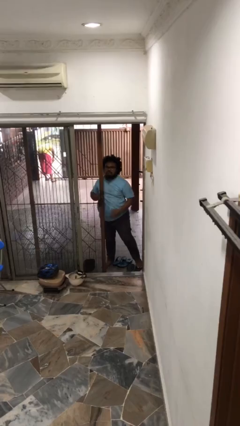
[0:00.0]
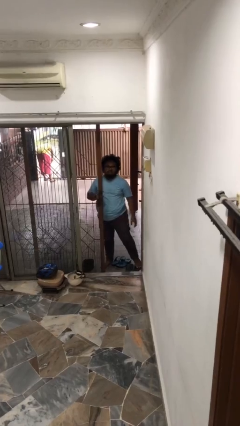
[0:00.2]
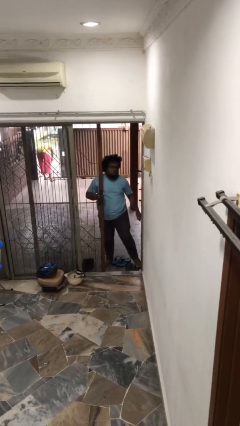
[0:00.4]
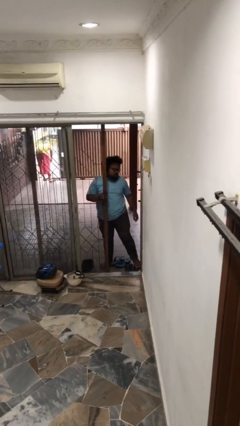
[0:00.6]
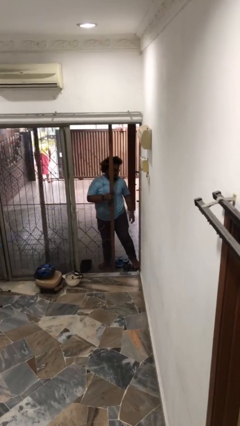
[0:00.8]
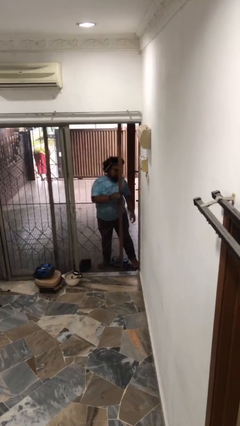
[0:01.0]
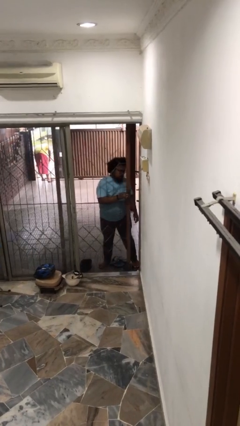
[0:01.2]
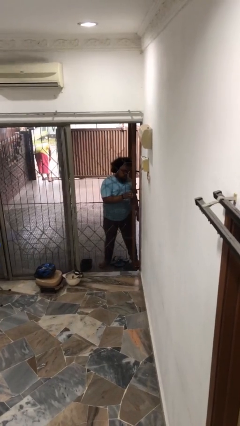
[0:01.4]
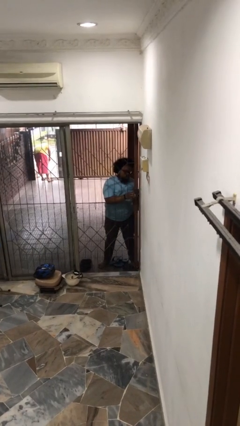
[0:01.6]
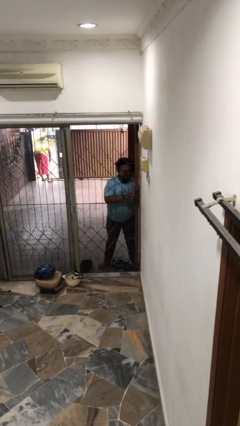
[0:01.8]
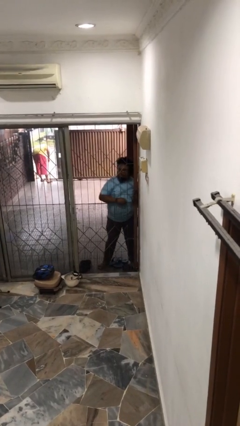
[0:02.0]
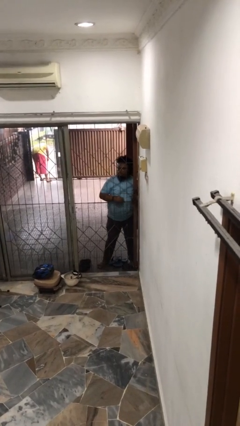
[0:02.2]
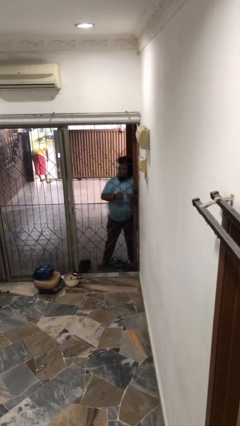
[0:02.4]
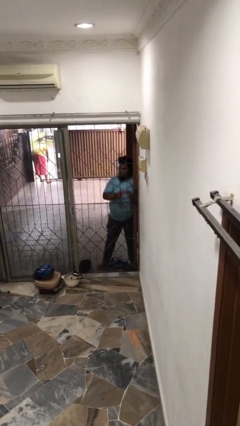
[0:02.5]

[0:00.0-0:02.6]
person closes facility door

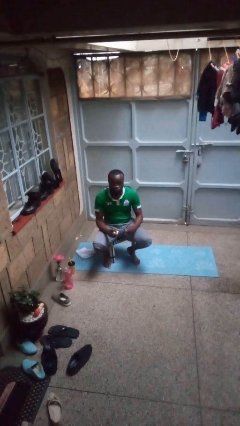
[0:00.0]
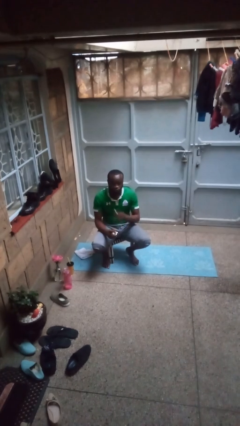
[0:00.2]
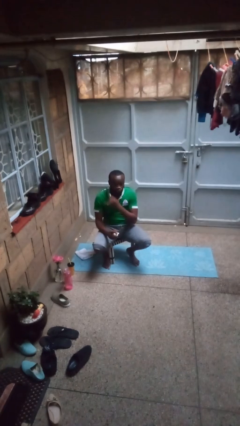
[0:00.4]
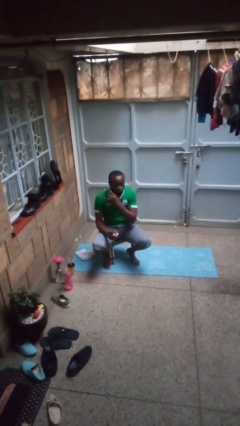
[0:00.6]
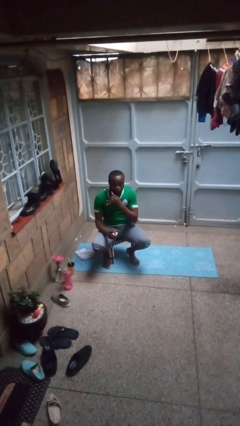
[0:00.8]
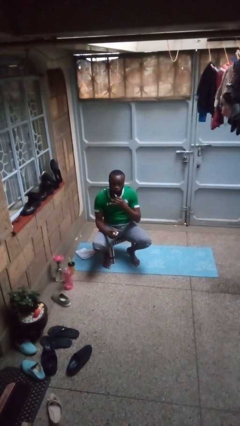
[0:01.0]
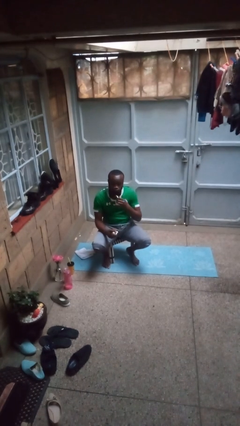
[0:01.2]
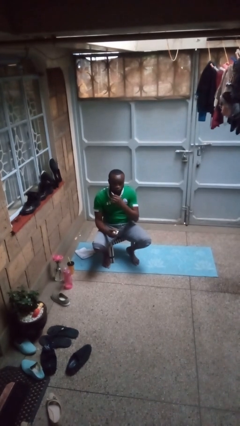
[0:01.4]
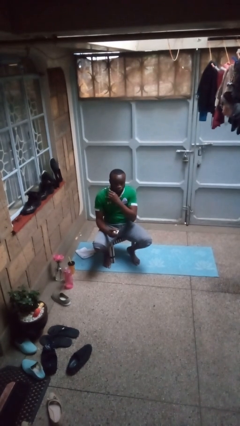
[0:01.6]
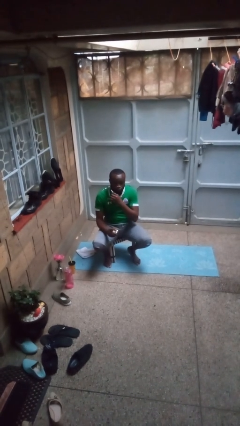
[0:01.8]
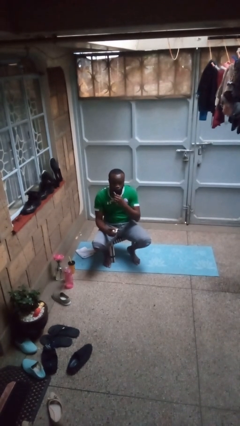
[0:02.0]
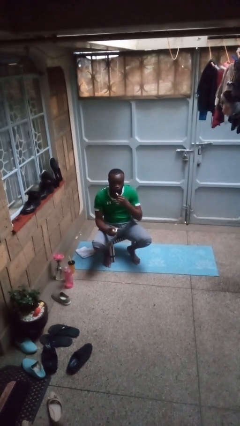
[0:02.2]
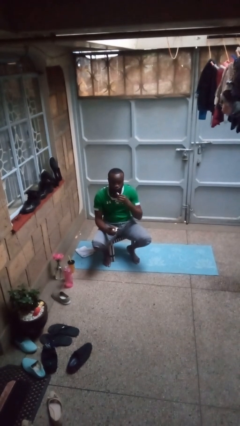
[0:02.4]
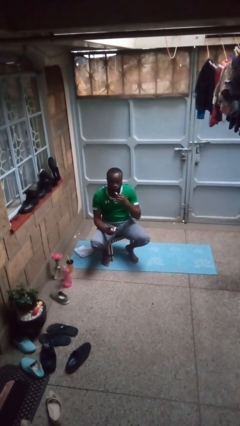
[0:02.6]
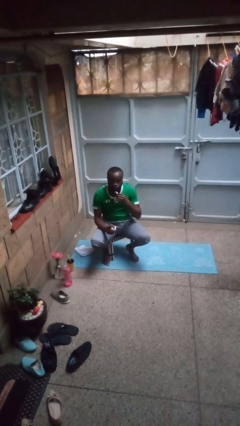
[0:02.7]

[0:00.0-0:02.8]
person shaves face

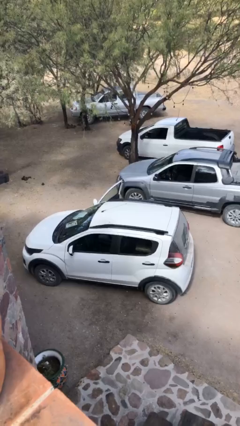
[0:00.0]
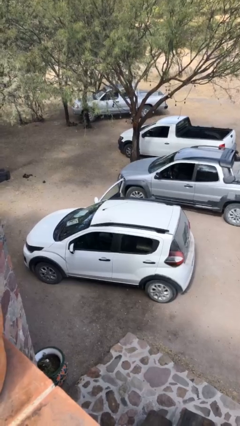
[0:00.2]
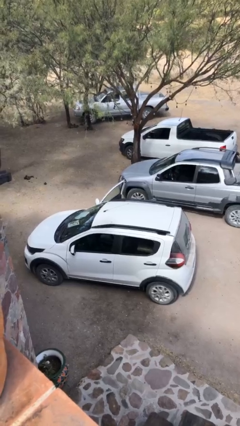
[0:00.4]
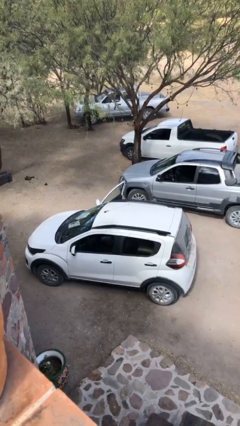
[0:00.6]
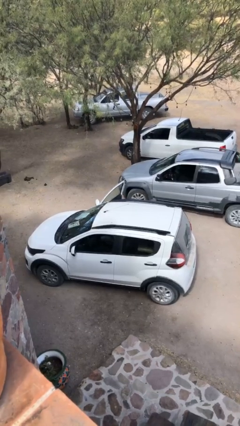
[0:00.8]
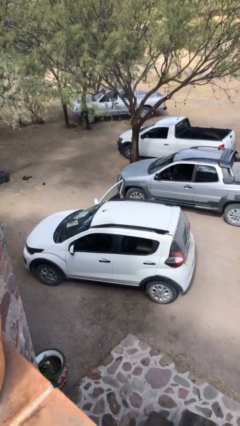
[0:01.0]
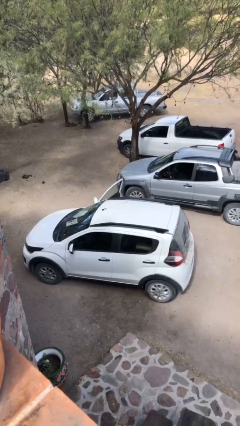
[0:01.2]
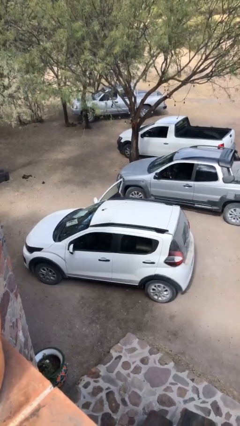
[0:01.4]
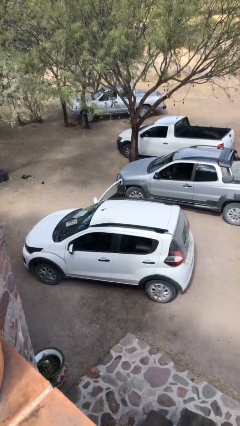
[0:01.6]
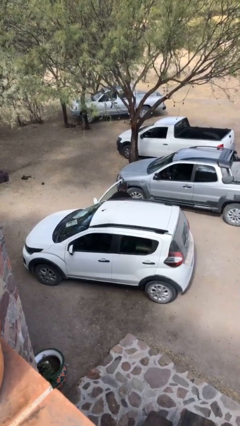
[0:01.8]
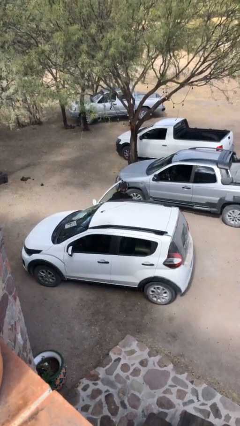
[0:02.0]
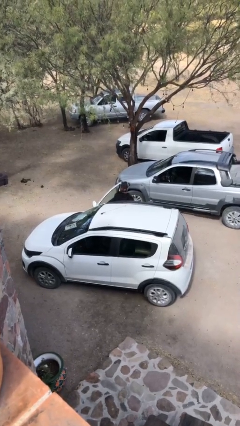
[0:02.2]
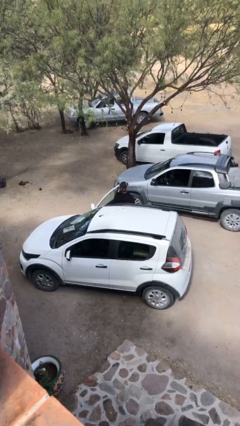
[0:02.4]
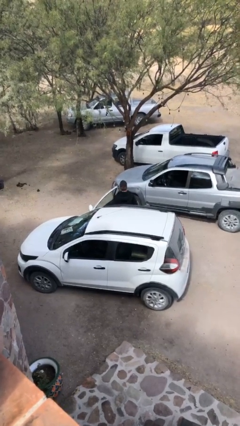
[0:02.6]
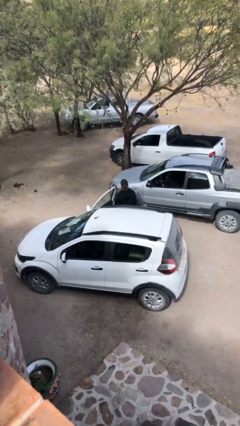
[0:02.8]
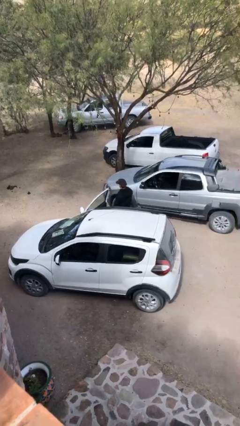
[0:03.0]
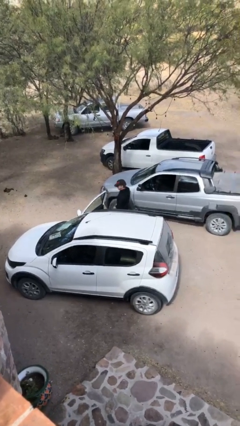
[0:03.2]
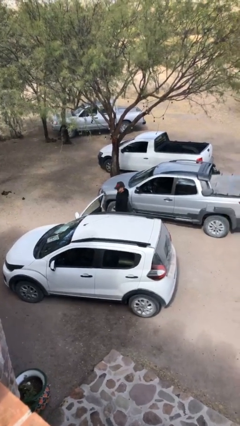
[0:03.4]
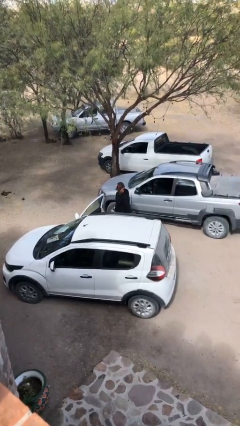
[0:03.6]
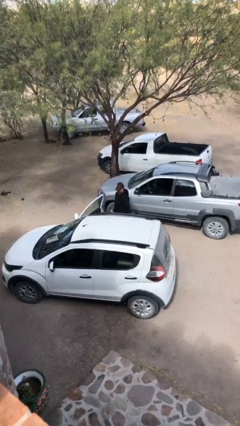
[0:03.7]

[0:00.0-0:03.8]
person exits car

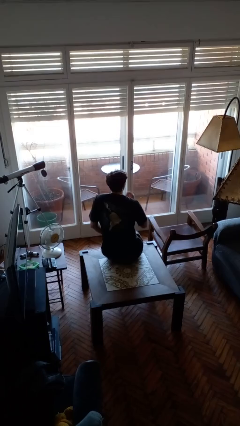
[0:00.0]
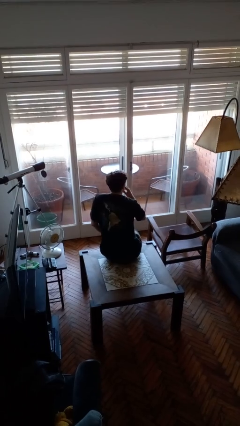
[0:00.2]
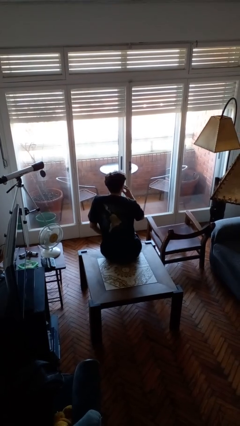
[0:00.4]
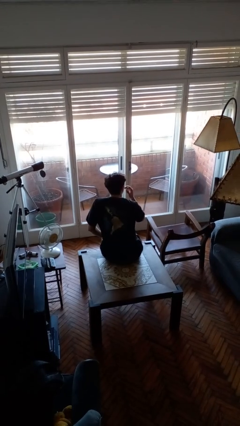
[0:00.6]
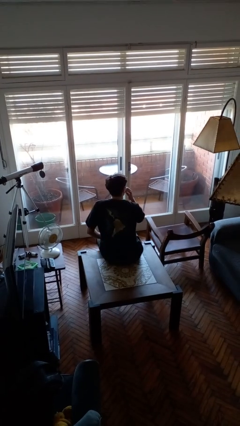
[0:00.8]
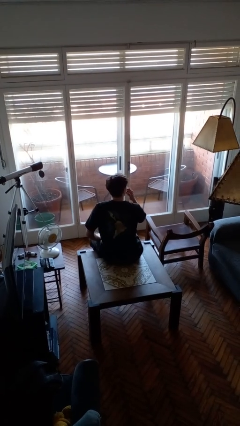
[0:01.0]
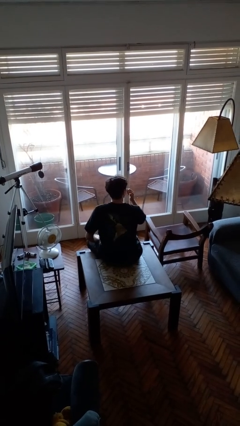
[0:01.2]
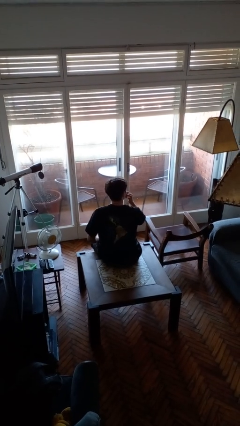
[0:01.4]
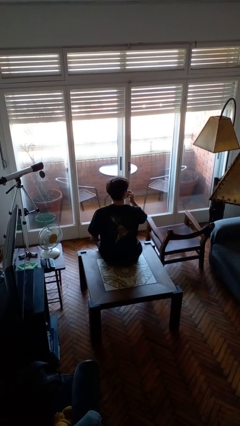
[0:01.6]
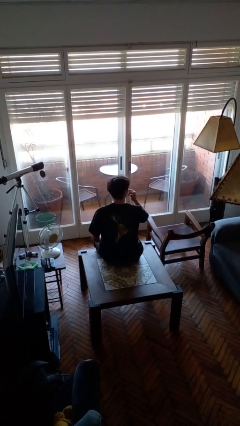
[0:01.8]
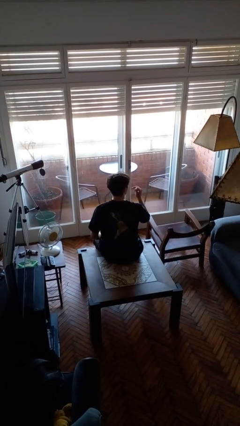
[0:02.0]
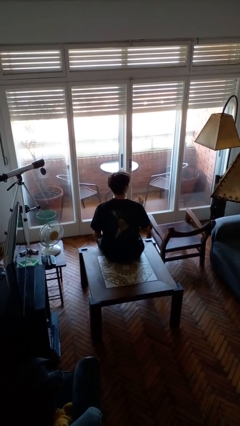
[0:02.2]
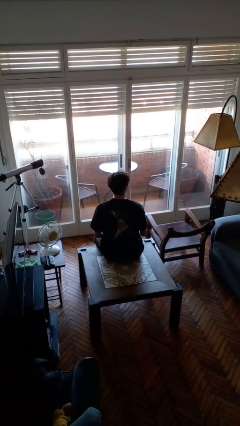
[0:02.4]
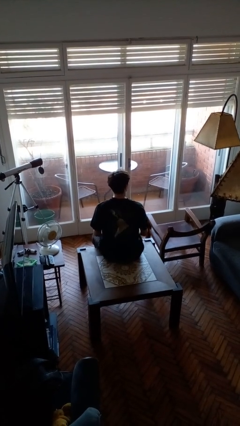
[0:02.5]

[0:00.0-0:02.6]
person licks fingers

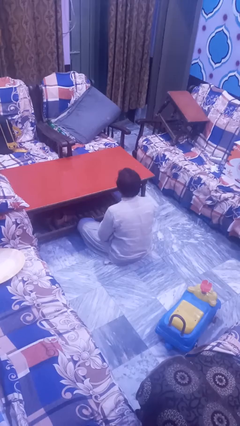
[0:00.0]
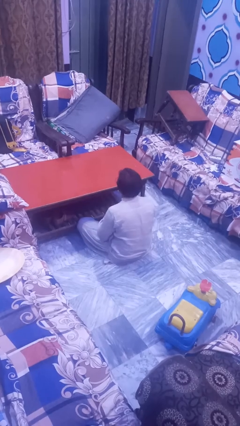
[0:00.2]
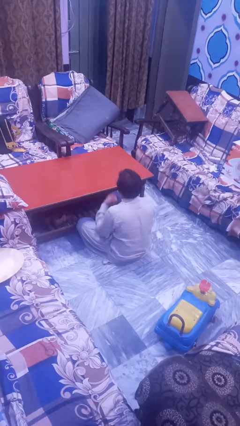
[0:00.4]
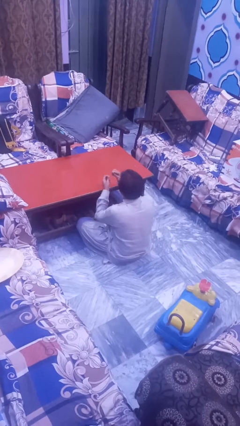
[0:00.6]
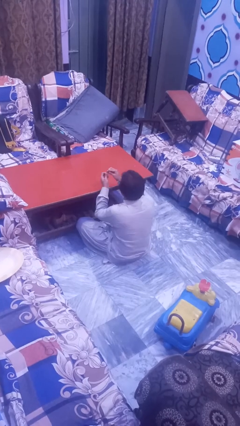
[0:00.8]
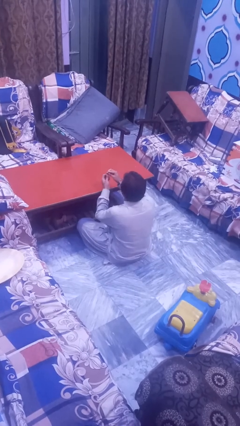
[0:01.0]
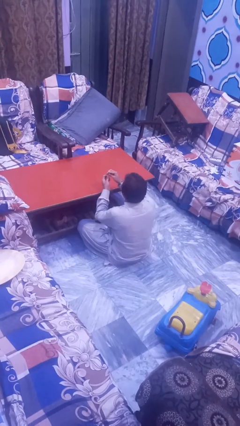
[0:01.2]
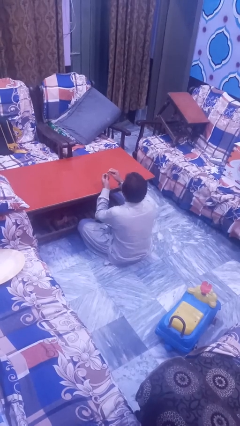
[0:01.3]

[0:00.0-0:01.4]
person files fingernails

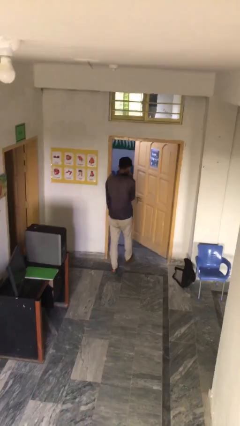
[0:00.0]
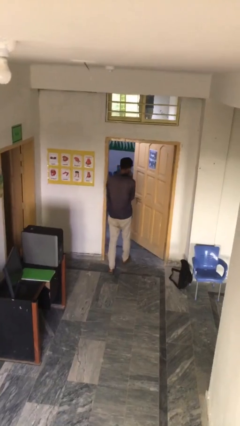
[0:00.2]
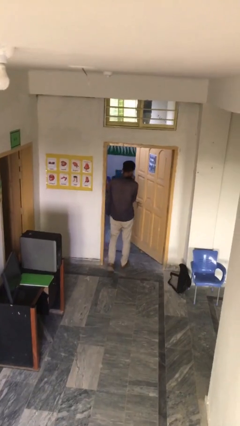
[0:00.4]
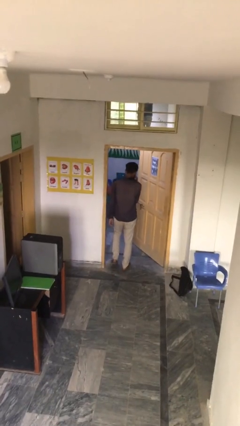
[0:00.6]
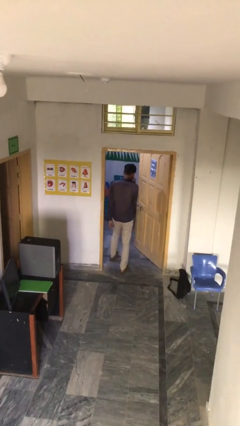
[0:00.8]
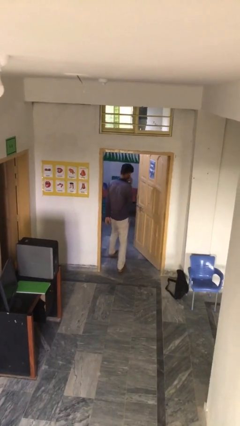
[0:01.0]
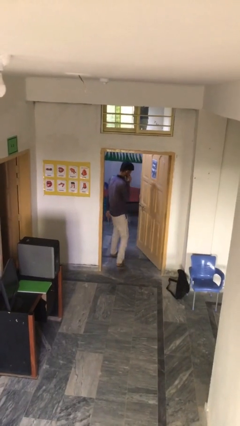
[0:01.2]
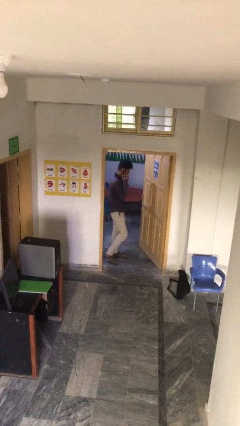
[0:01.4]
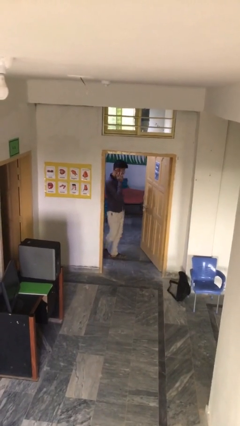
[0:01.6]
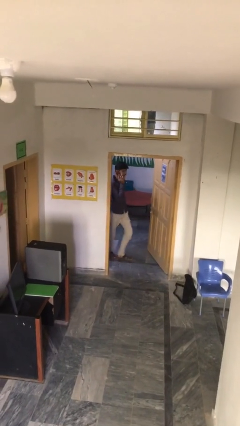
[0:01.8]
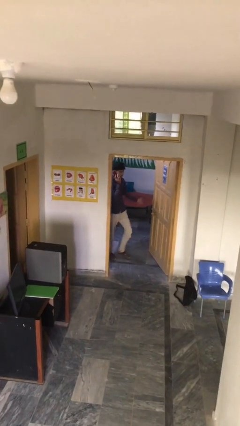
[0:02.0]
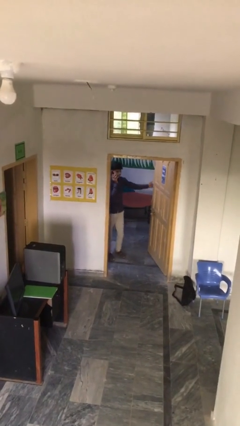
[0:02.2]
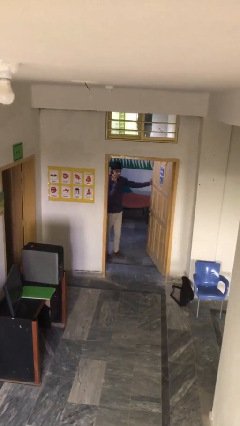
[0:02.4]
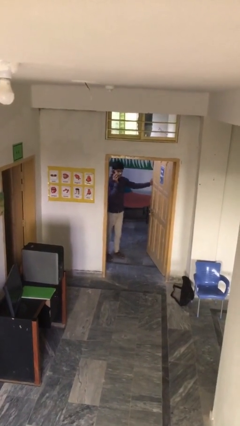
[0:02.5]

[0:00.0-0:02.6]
person exits scene through structure

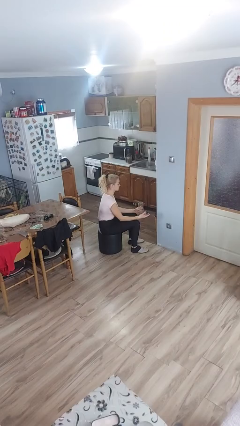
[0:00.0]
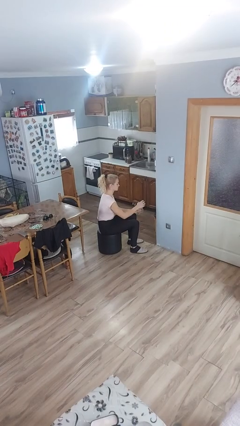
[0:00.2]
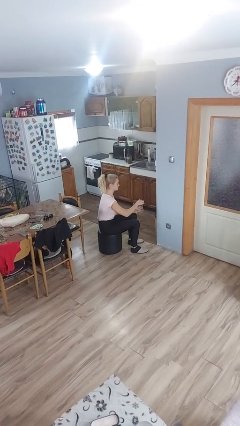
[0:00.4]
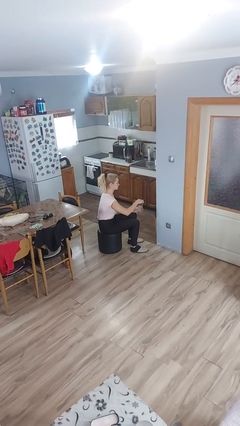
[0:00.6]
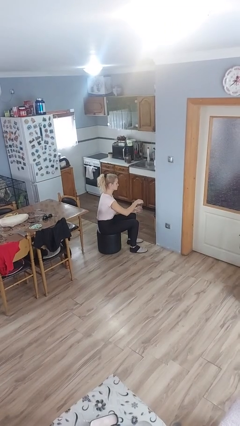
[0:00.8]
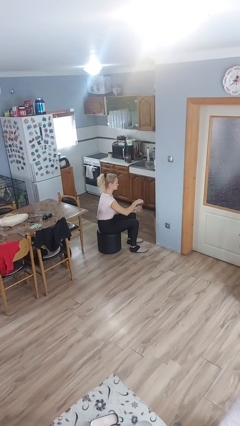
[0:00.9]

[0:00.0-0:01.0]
person closes jar

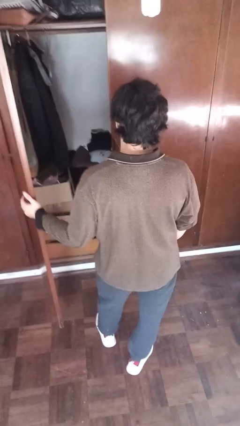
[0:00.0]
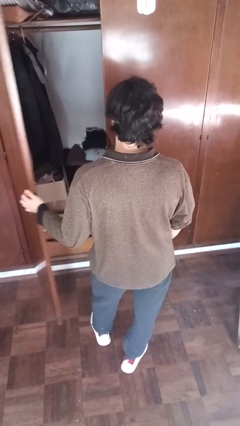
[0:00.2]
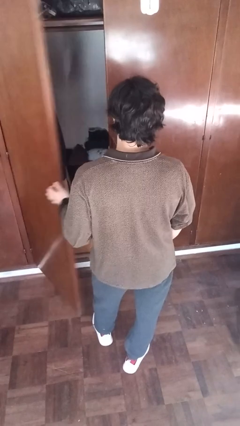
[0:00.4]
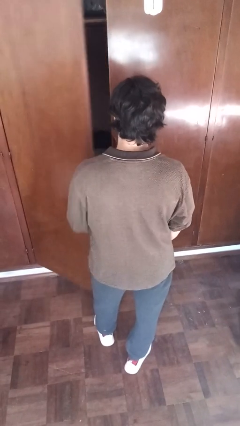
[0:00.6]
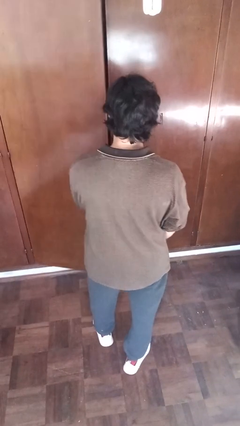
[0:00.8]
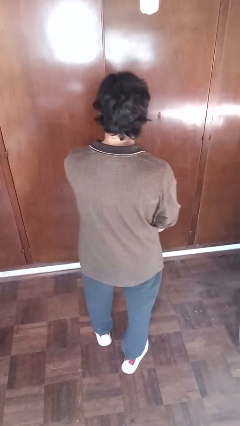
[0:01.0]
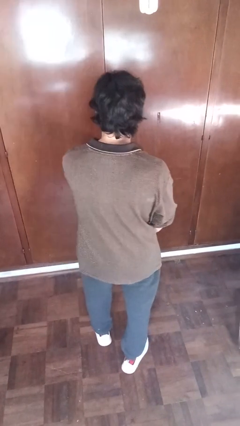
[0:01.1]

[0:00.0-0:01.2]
person closes closet door
